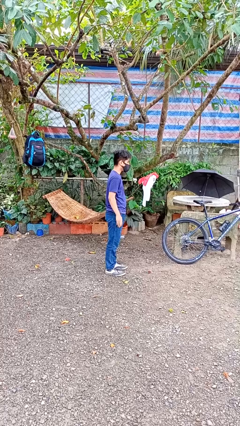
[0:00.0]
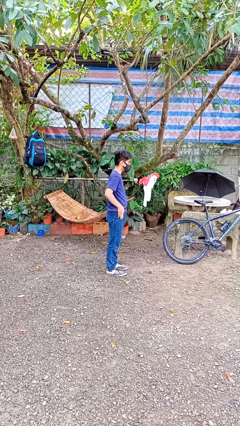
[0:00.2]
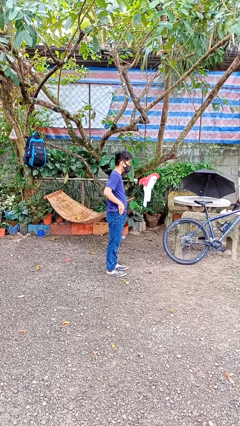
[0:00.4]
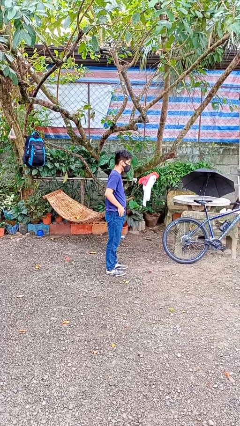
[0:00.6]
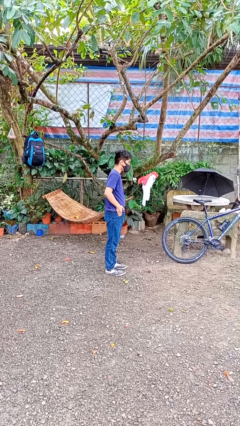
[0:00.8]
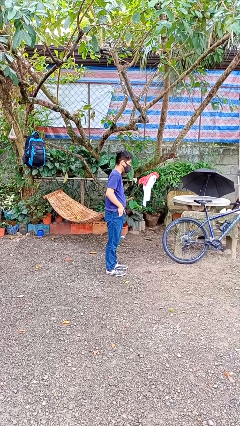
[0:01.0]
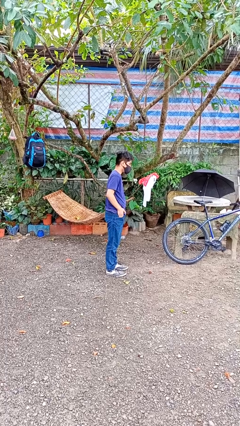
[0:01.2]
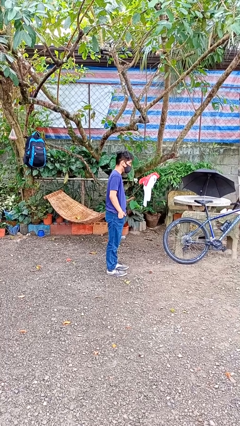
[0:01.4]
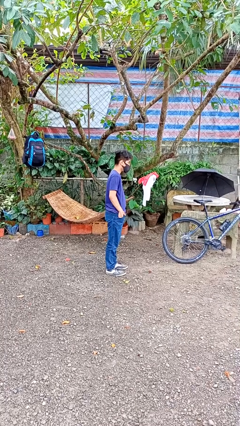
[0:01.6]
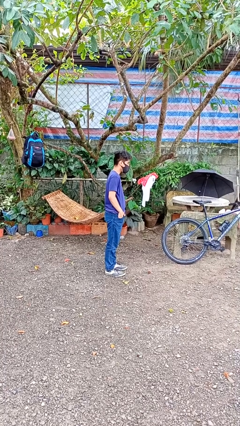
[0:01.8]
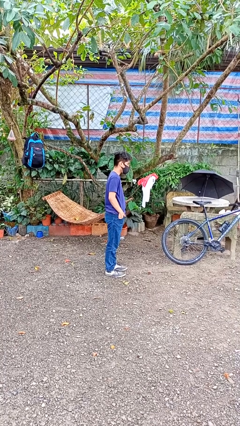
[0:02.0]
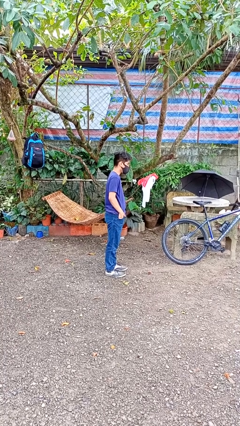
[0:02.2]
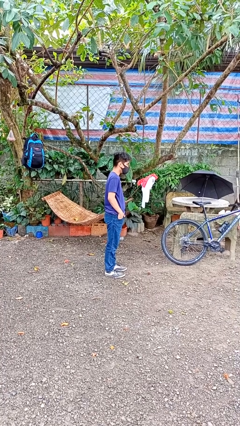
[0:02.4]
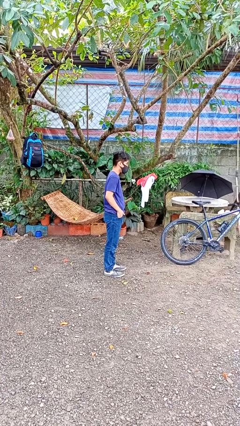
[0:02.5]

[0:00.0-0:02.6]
person puts hands in back pockets

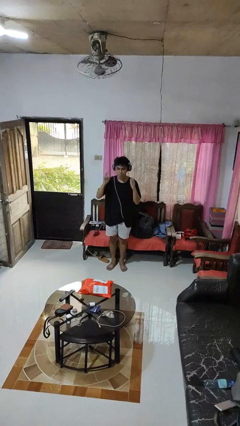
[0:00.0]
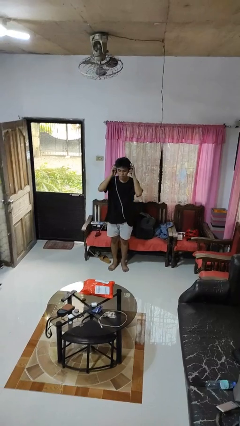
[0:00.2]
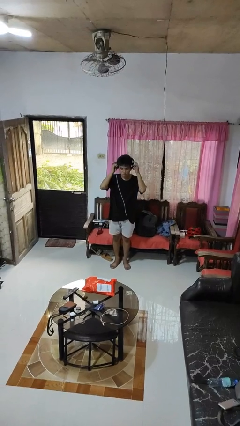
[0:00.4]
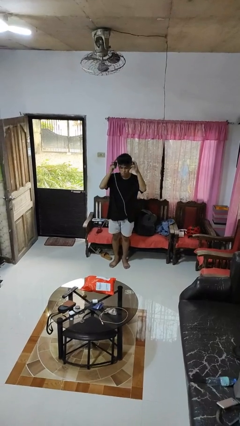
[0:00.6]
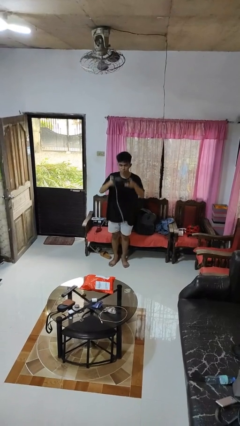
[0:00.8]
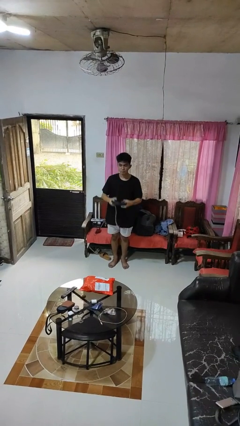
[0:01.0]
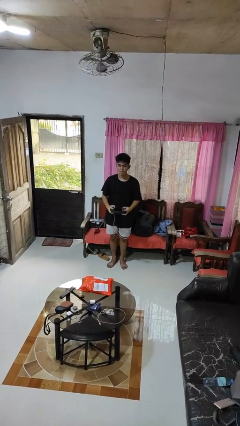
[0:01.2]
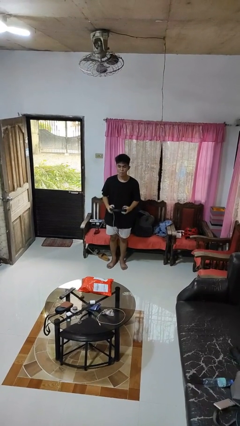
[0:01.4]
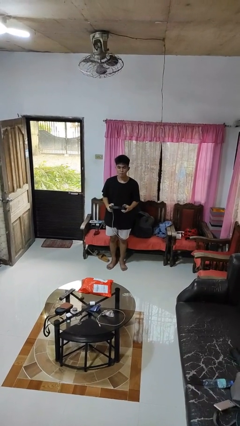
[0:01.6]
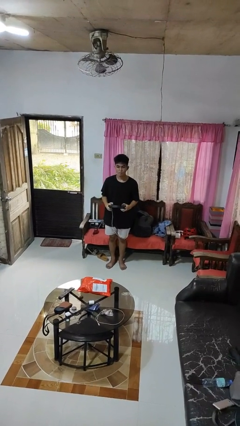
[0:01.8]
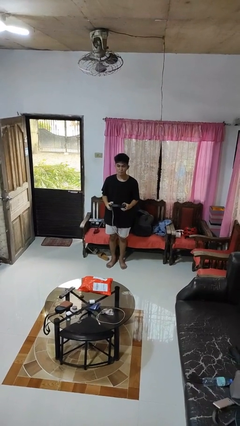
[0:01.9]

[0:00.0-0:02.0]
person takes off headphones

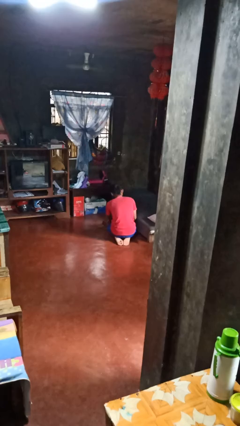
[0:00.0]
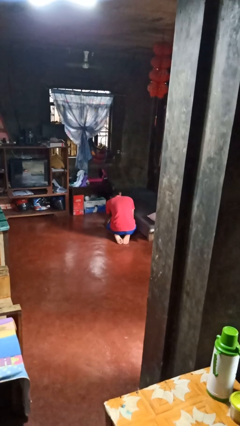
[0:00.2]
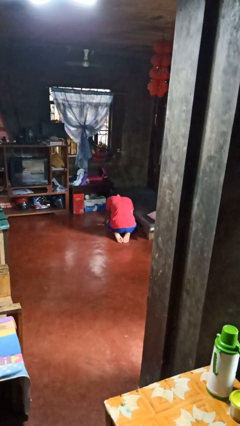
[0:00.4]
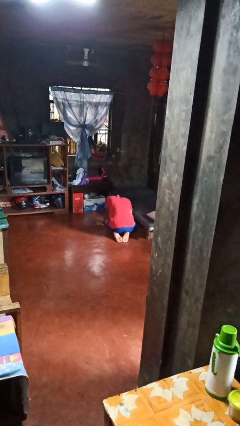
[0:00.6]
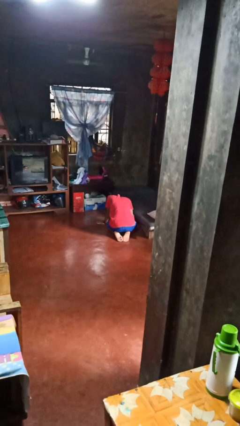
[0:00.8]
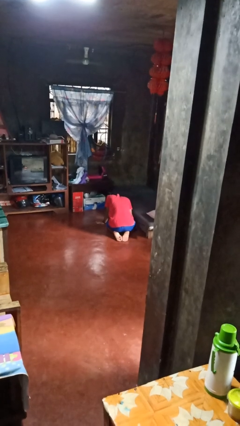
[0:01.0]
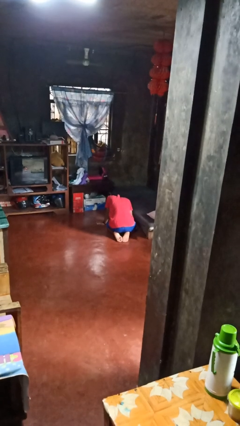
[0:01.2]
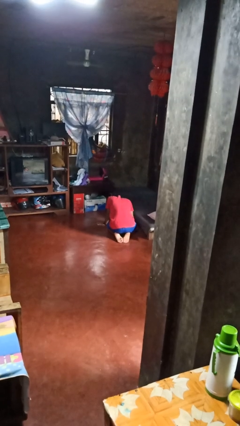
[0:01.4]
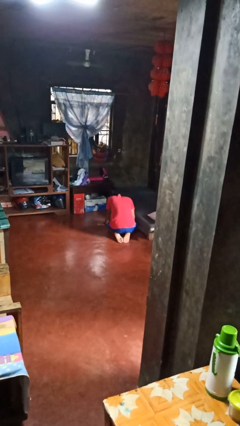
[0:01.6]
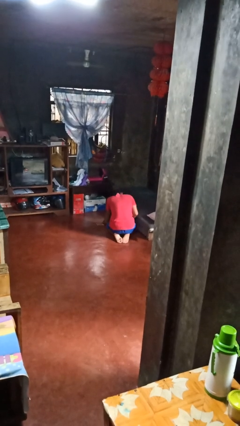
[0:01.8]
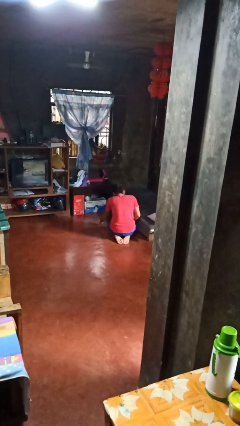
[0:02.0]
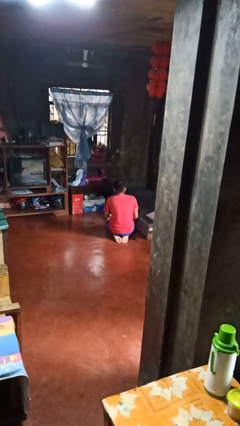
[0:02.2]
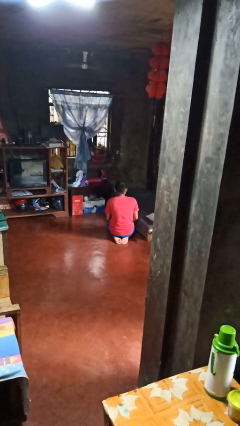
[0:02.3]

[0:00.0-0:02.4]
person searches under bed

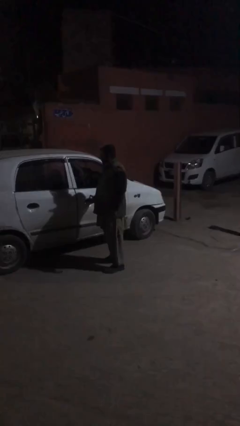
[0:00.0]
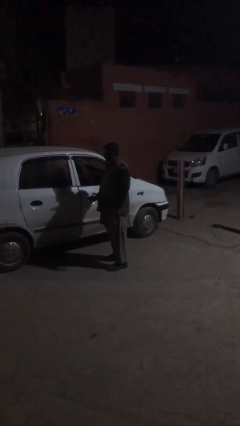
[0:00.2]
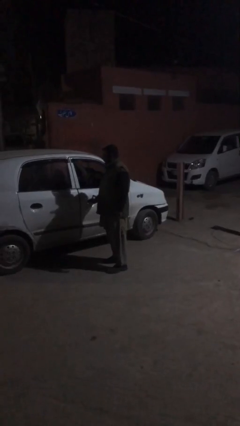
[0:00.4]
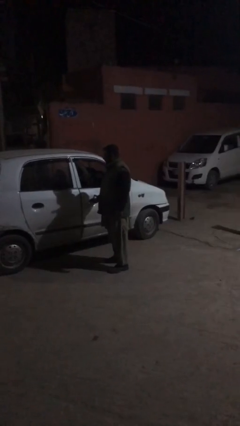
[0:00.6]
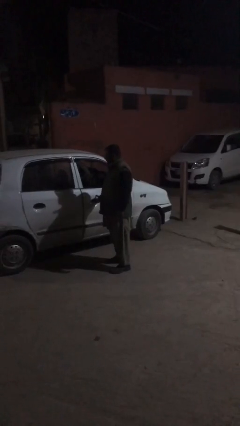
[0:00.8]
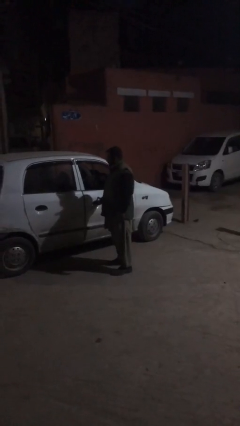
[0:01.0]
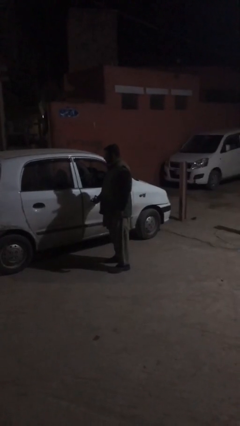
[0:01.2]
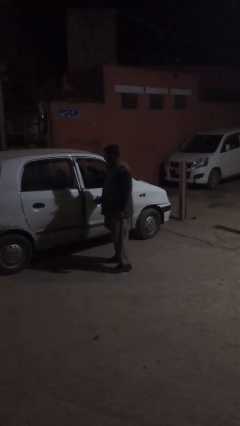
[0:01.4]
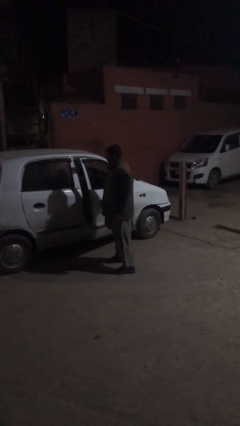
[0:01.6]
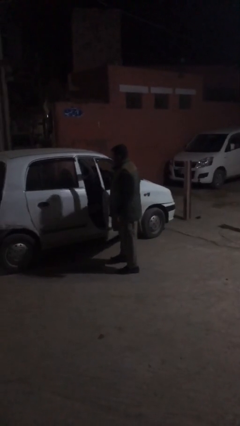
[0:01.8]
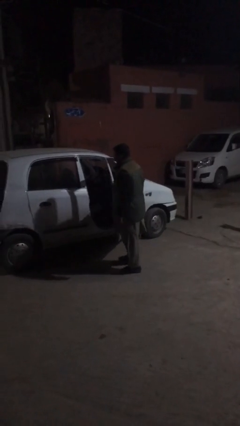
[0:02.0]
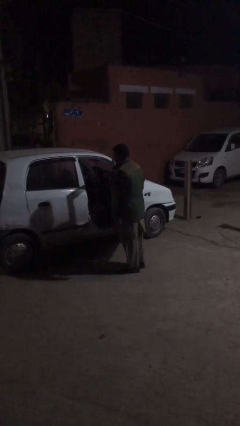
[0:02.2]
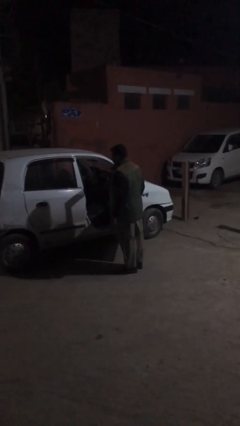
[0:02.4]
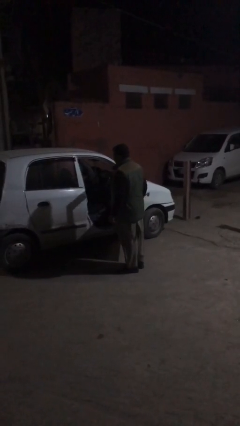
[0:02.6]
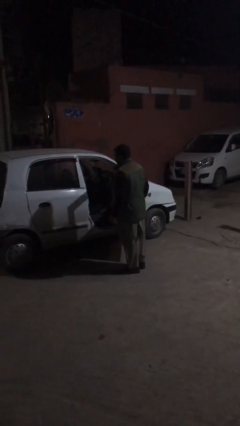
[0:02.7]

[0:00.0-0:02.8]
person opens car door

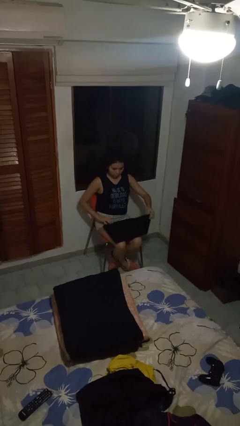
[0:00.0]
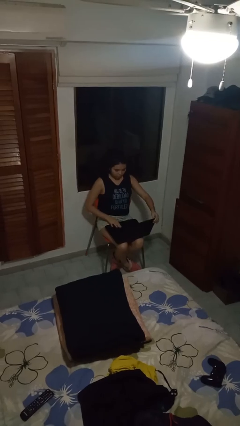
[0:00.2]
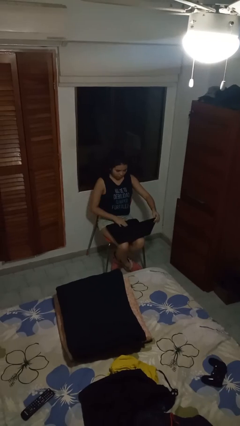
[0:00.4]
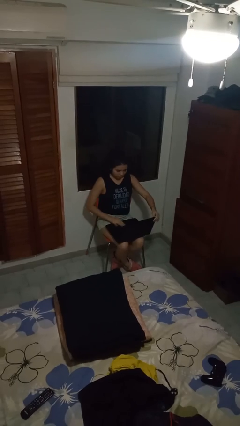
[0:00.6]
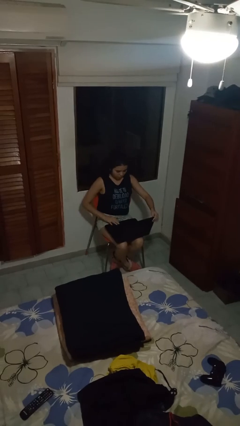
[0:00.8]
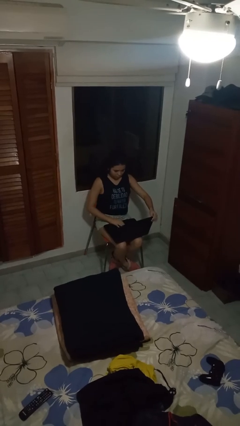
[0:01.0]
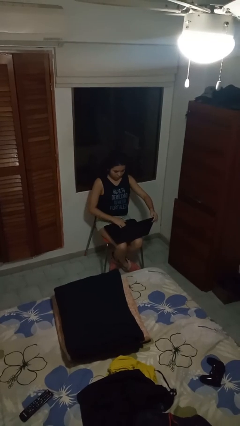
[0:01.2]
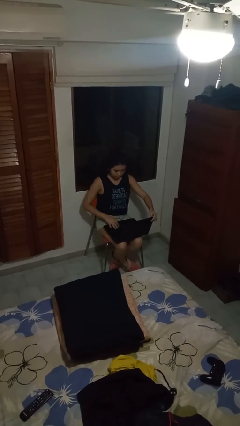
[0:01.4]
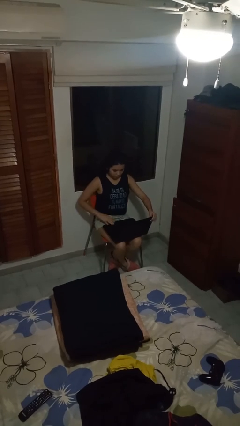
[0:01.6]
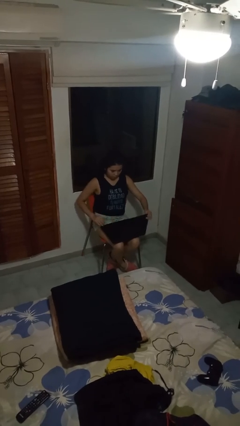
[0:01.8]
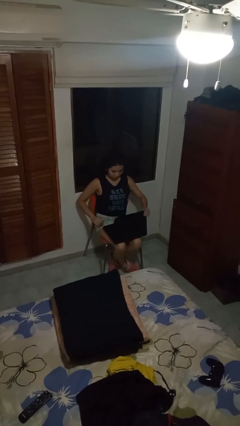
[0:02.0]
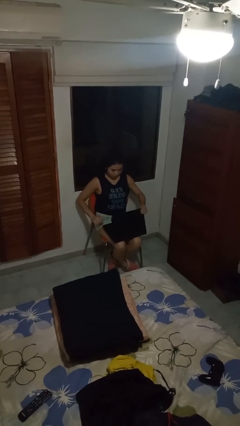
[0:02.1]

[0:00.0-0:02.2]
person interacts with laptop

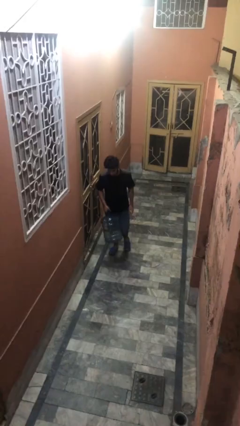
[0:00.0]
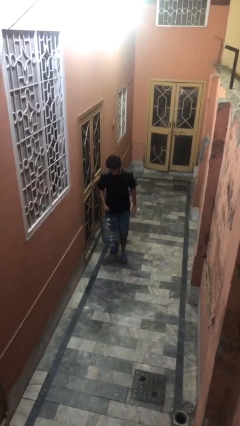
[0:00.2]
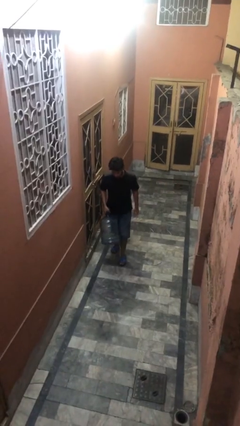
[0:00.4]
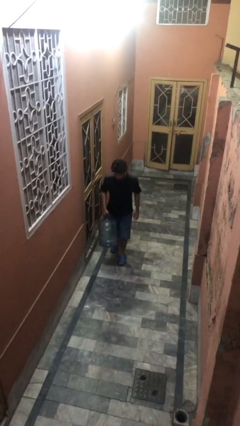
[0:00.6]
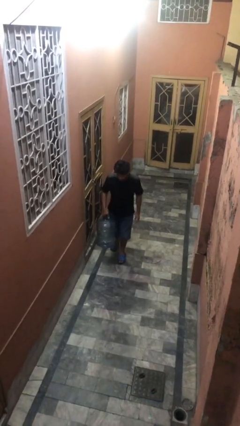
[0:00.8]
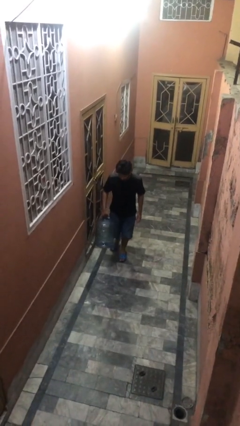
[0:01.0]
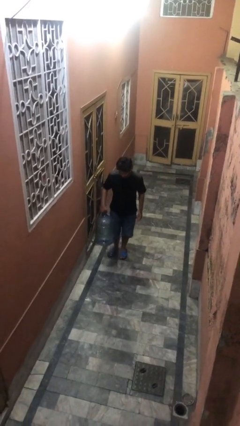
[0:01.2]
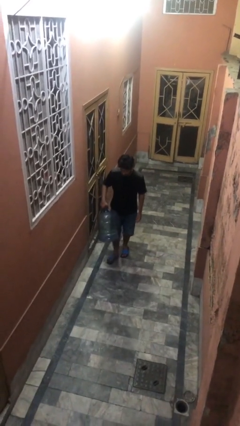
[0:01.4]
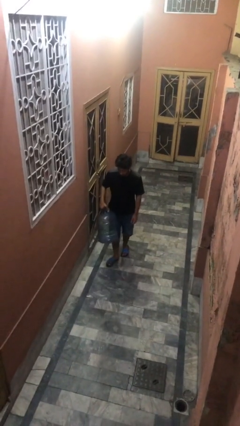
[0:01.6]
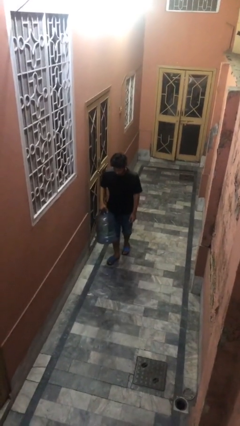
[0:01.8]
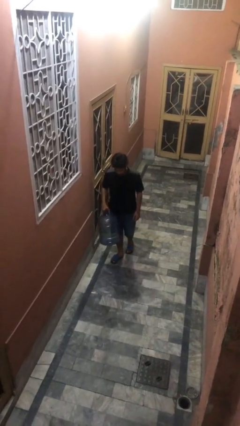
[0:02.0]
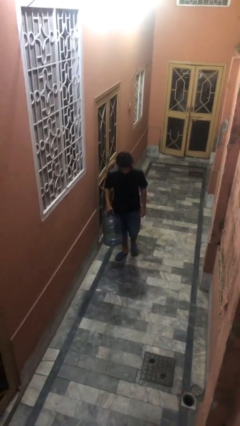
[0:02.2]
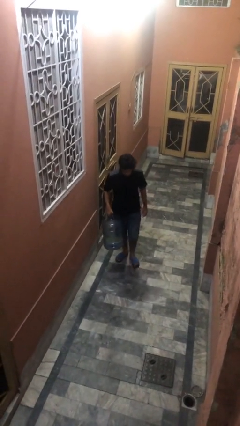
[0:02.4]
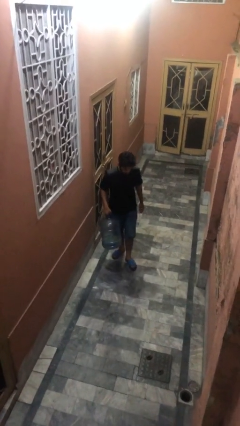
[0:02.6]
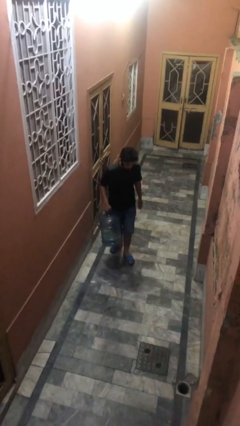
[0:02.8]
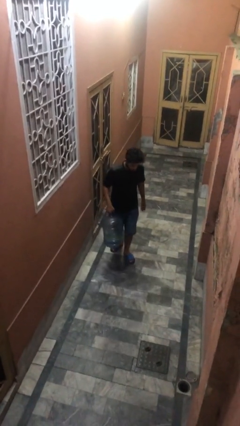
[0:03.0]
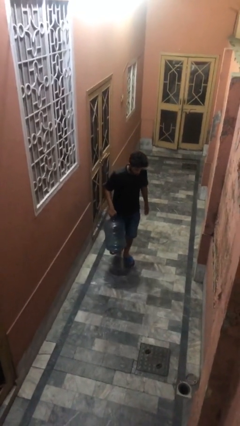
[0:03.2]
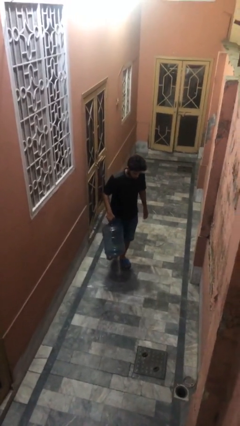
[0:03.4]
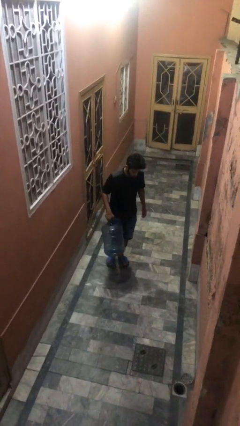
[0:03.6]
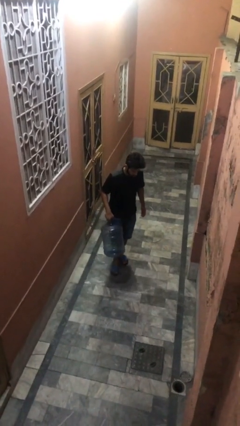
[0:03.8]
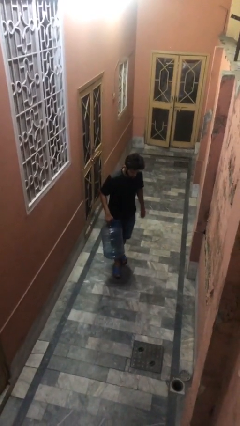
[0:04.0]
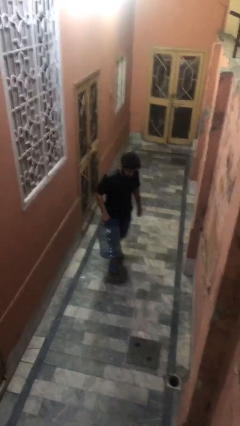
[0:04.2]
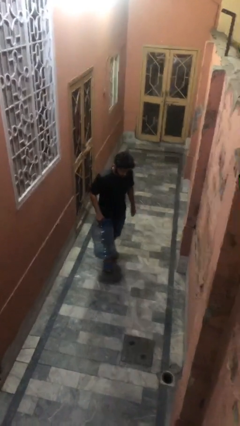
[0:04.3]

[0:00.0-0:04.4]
person carries heavy object

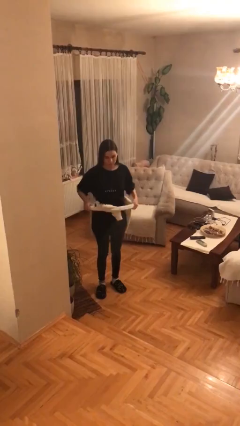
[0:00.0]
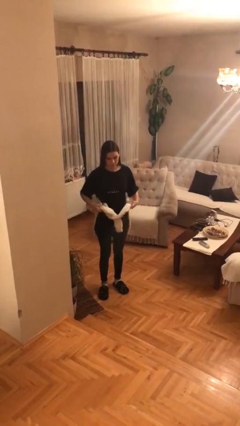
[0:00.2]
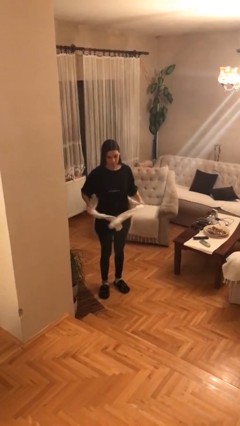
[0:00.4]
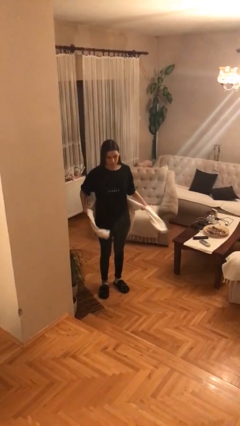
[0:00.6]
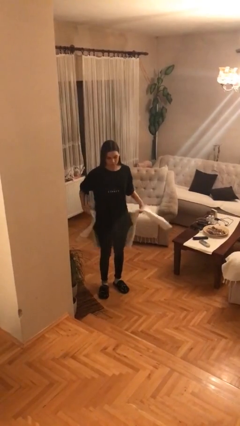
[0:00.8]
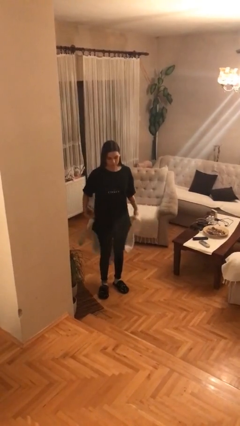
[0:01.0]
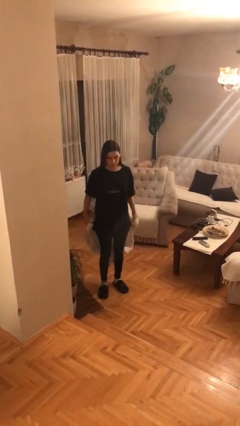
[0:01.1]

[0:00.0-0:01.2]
person unties jacket around waist
